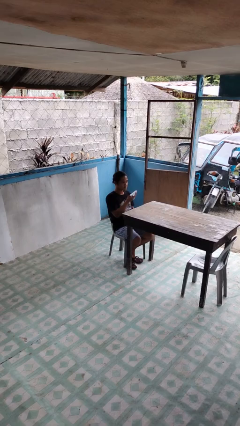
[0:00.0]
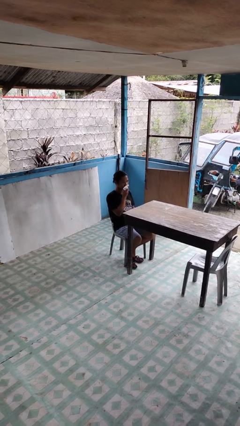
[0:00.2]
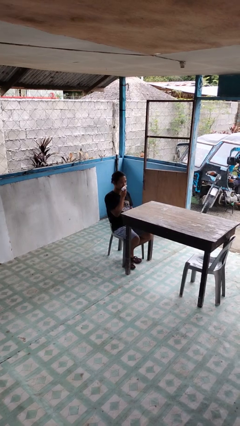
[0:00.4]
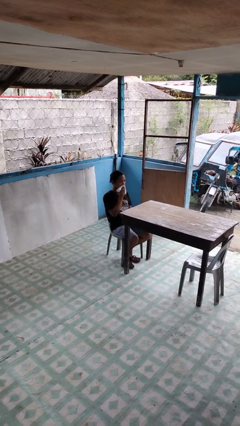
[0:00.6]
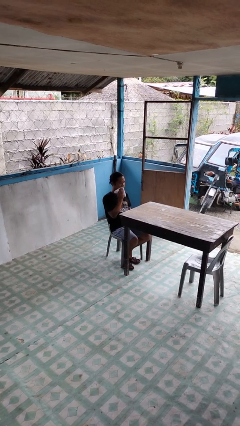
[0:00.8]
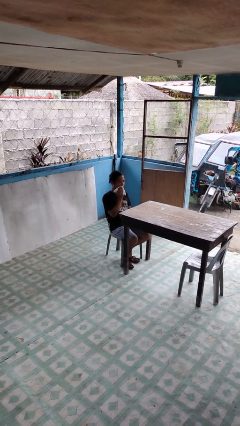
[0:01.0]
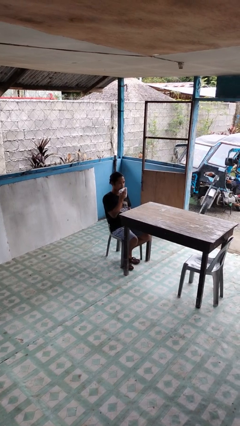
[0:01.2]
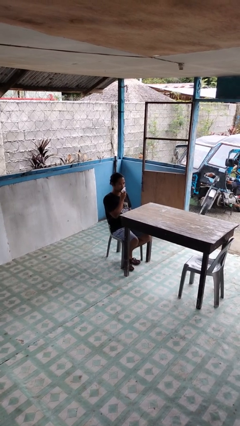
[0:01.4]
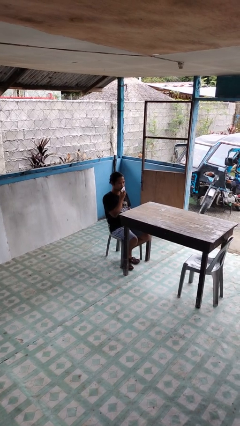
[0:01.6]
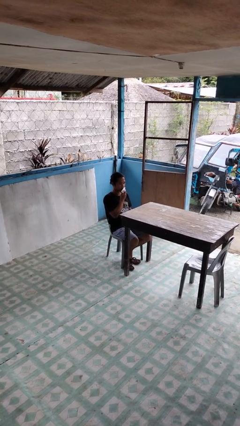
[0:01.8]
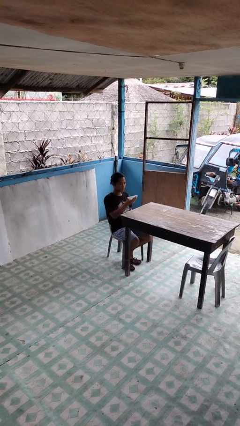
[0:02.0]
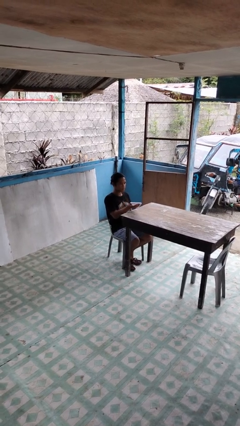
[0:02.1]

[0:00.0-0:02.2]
person wipes mouth with napkin

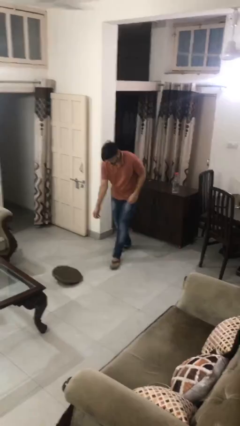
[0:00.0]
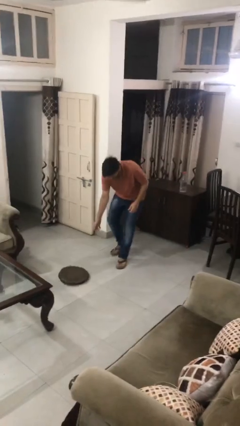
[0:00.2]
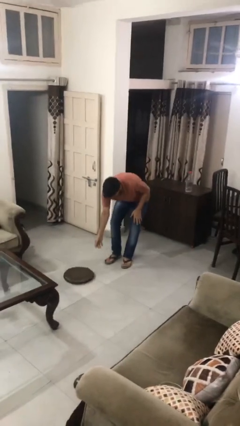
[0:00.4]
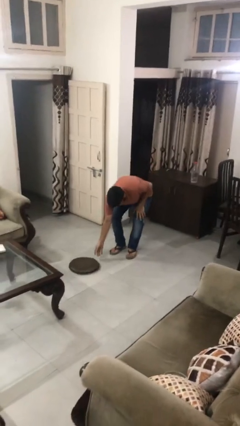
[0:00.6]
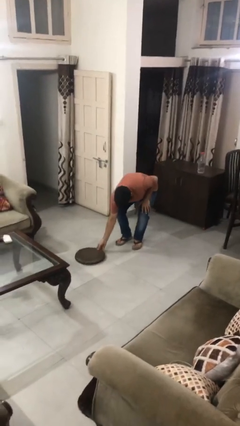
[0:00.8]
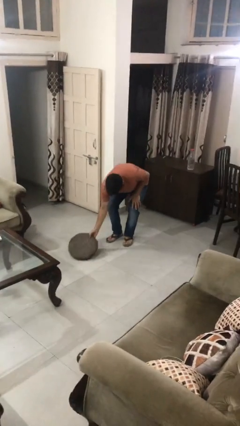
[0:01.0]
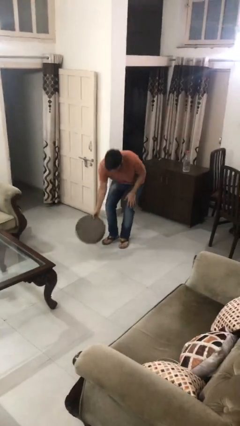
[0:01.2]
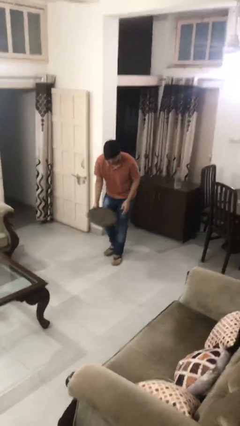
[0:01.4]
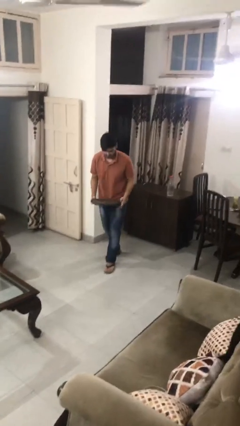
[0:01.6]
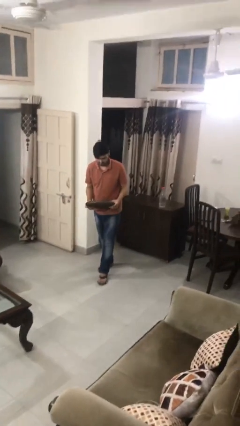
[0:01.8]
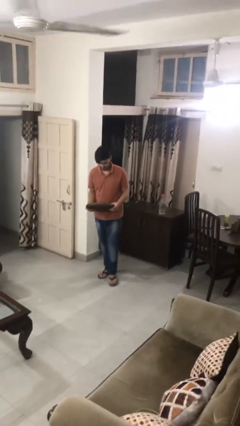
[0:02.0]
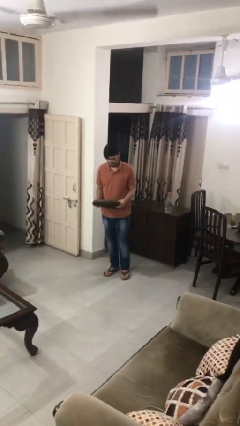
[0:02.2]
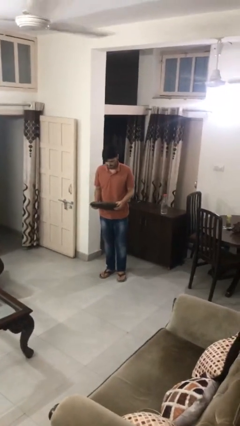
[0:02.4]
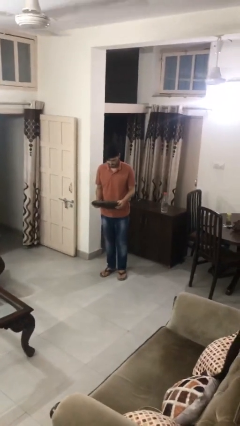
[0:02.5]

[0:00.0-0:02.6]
person picks up object from floor

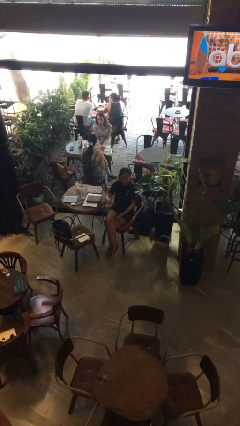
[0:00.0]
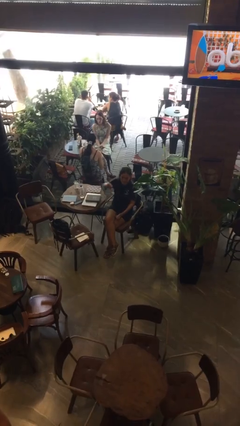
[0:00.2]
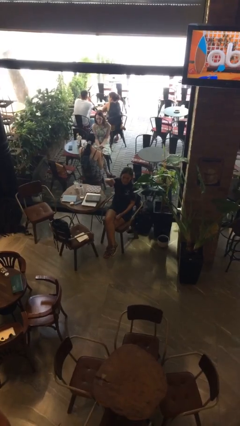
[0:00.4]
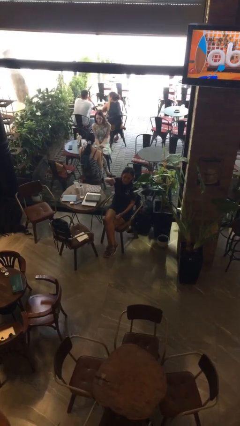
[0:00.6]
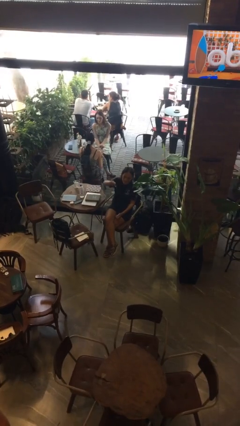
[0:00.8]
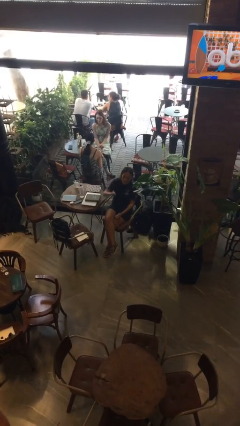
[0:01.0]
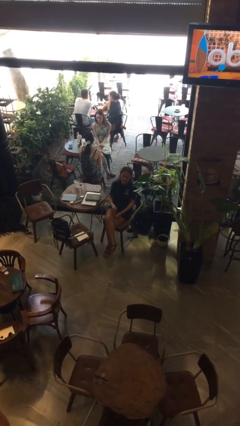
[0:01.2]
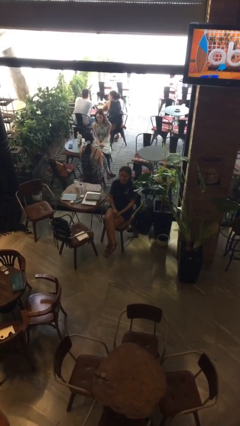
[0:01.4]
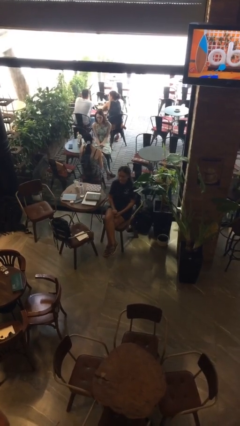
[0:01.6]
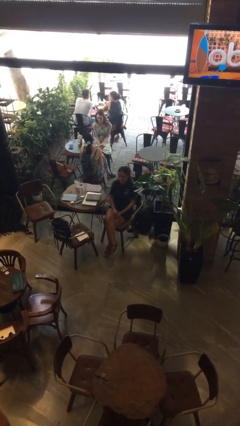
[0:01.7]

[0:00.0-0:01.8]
person gestures thumbs down

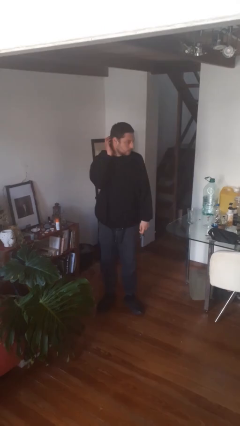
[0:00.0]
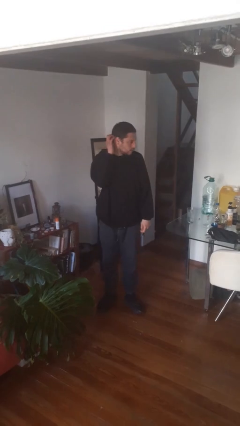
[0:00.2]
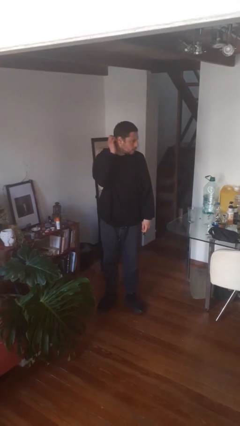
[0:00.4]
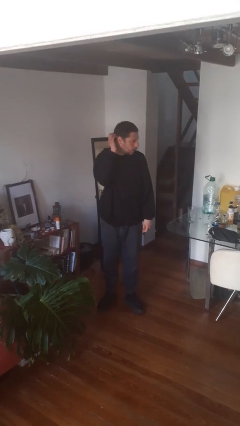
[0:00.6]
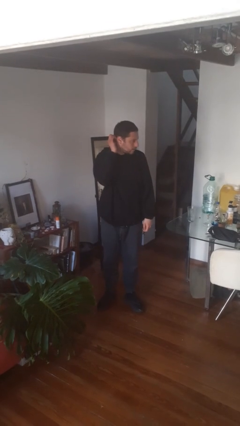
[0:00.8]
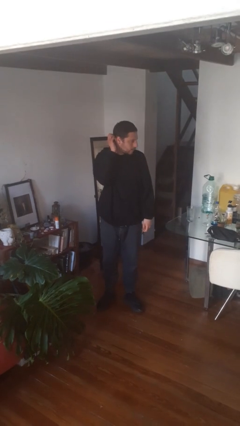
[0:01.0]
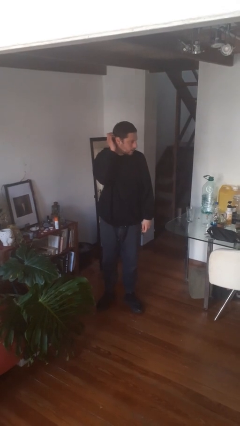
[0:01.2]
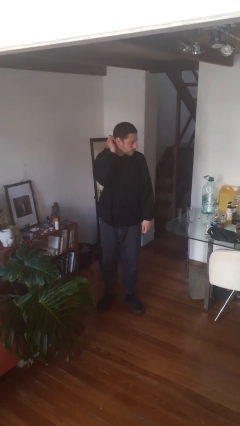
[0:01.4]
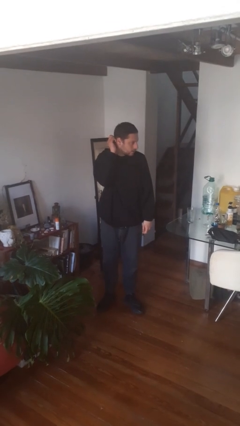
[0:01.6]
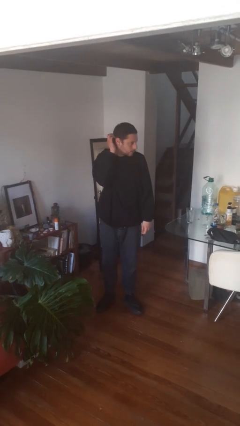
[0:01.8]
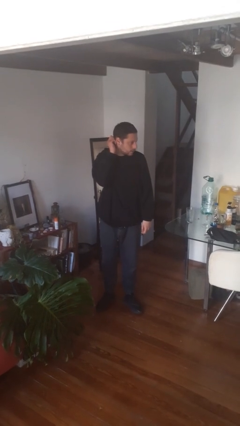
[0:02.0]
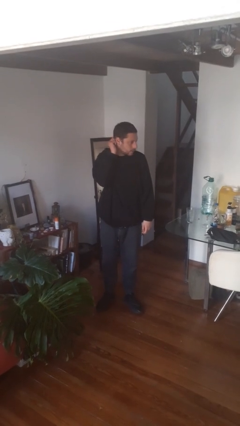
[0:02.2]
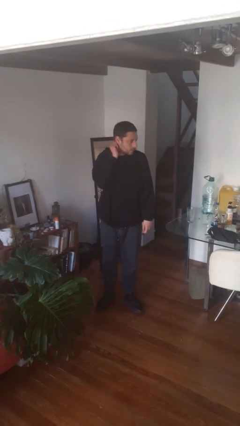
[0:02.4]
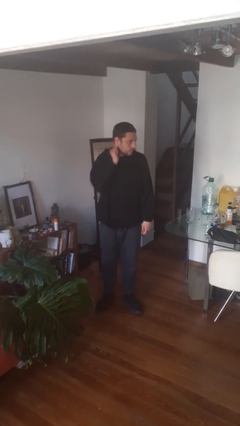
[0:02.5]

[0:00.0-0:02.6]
person scratches face

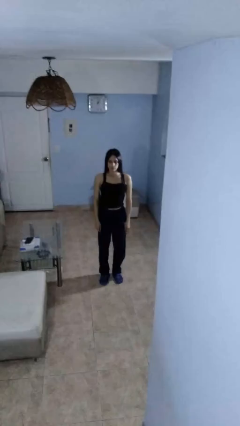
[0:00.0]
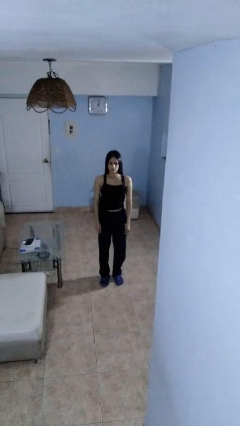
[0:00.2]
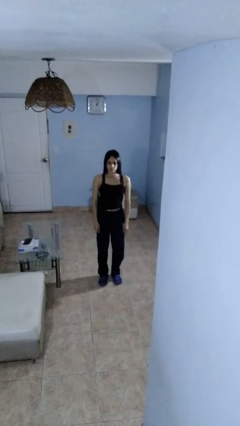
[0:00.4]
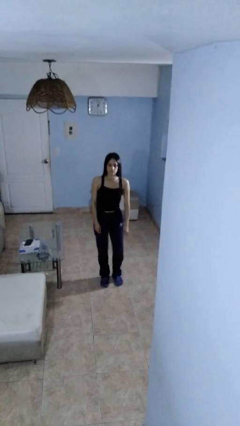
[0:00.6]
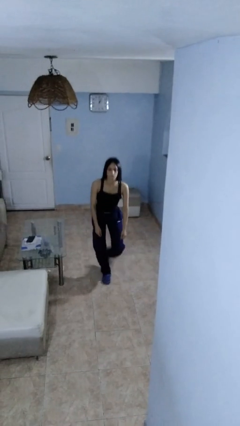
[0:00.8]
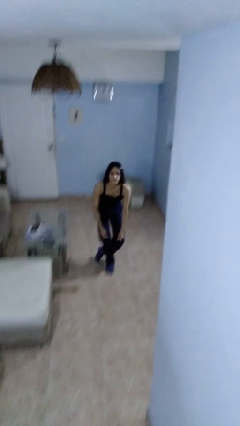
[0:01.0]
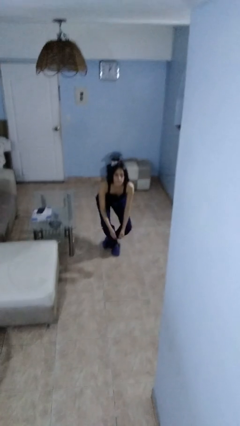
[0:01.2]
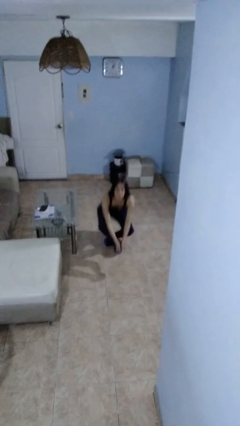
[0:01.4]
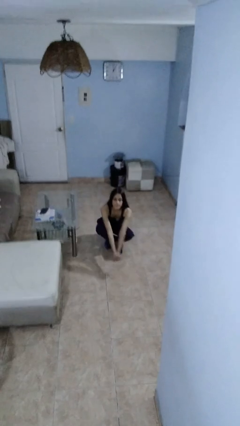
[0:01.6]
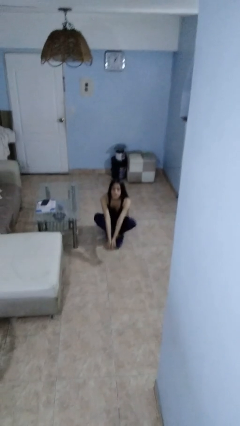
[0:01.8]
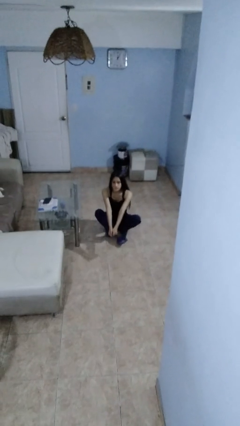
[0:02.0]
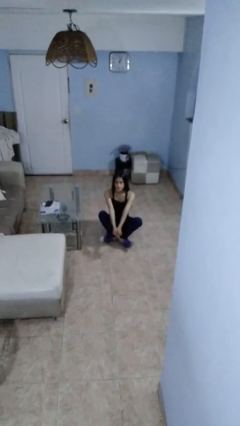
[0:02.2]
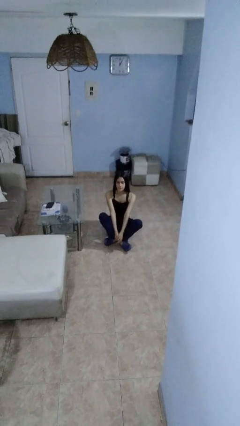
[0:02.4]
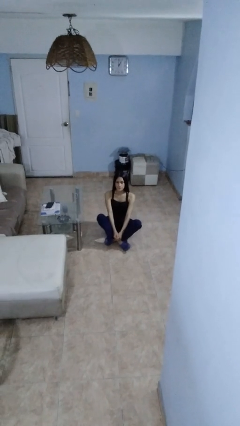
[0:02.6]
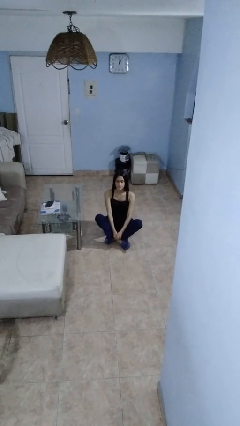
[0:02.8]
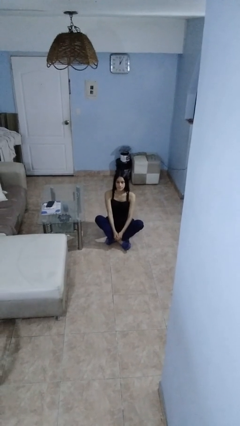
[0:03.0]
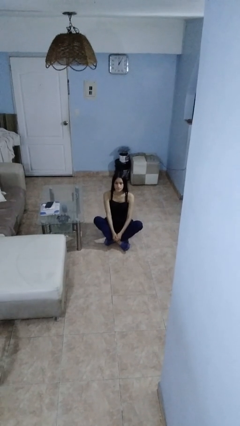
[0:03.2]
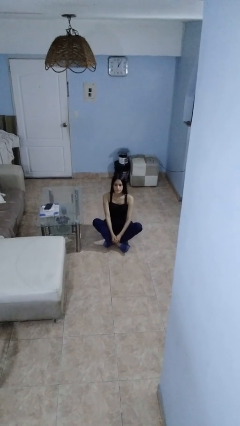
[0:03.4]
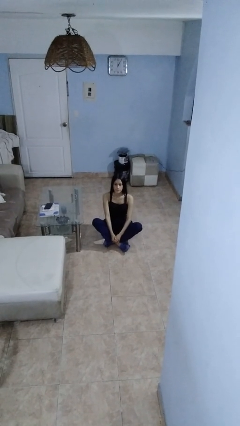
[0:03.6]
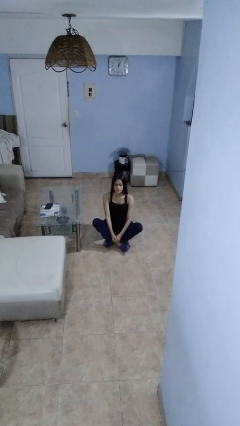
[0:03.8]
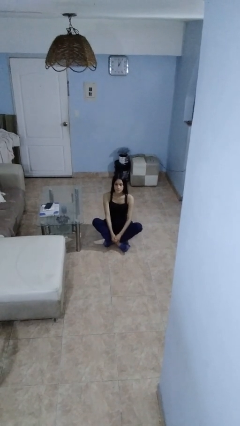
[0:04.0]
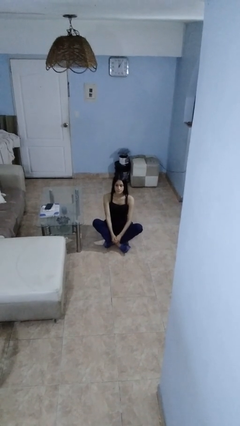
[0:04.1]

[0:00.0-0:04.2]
person sits crisscross

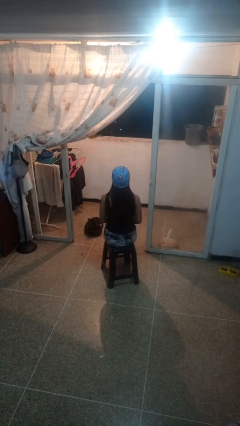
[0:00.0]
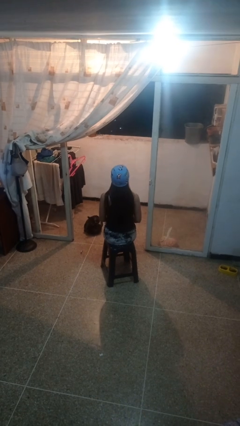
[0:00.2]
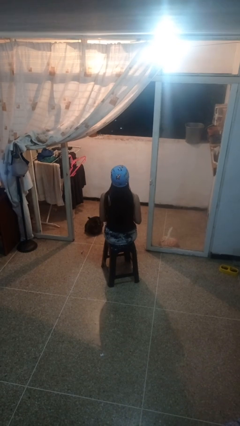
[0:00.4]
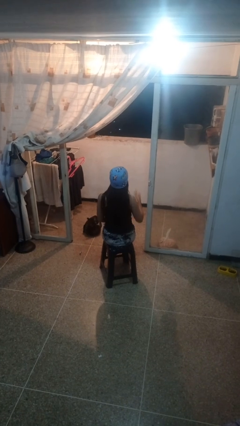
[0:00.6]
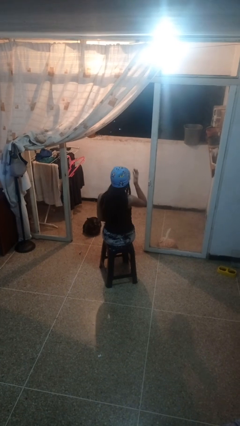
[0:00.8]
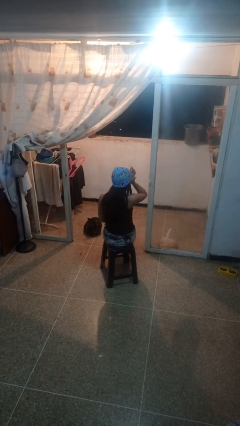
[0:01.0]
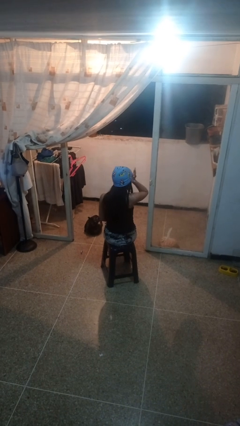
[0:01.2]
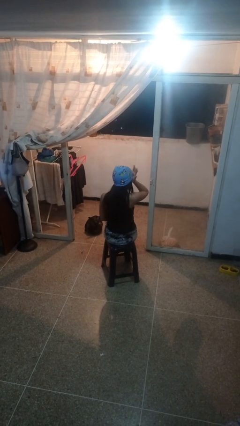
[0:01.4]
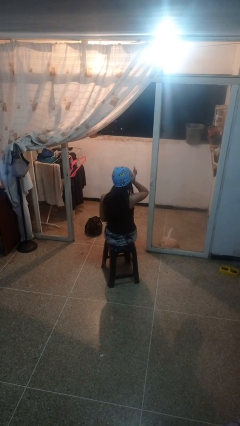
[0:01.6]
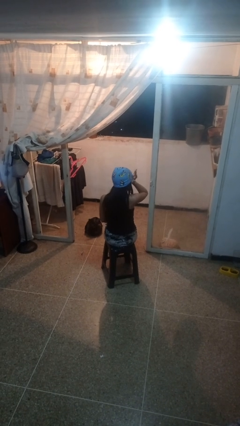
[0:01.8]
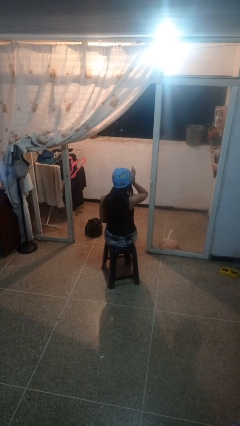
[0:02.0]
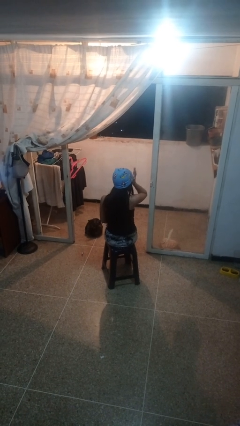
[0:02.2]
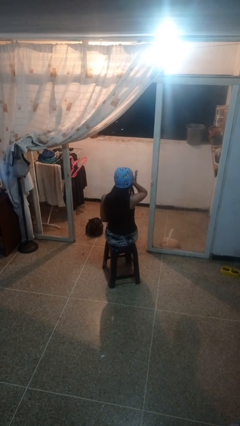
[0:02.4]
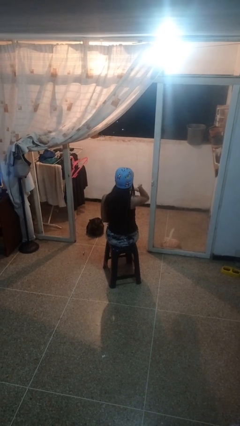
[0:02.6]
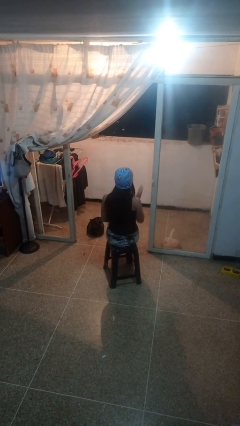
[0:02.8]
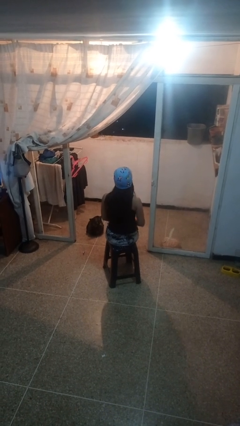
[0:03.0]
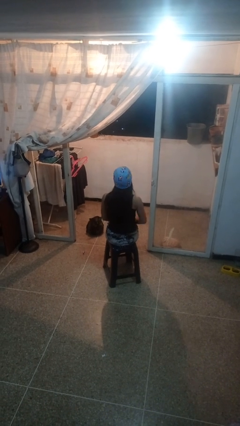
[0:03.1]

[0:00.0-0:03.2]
person rubs eyes

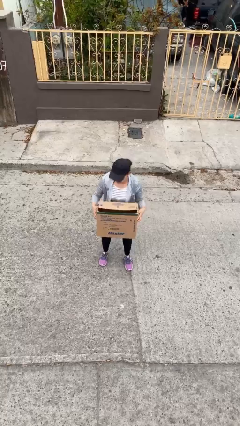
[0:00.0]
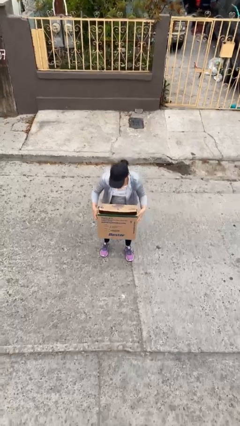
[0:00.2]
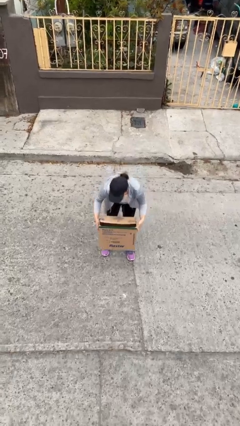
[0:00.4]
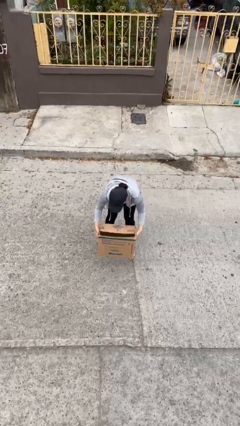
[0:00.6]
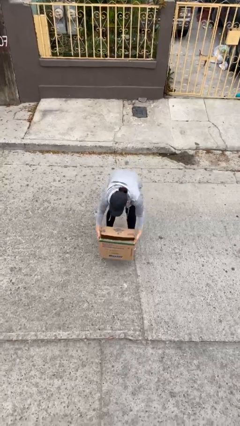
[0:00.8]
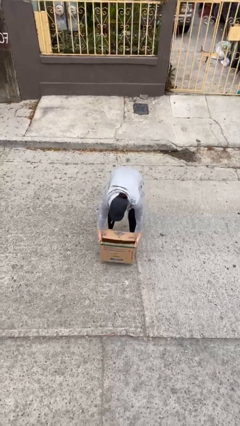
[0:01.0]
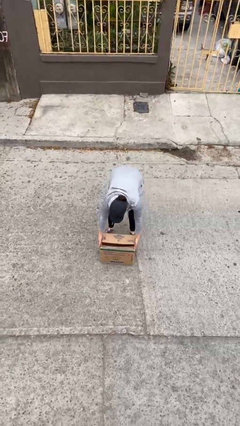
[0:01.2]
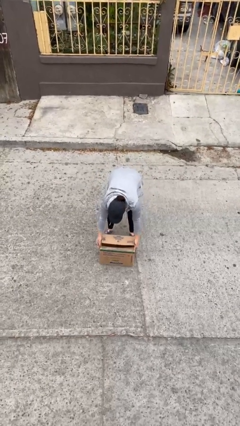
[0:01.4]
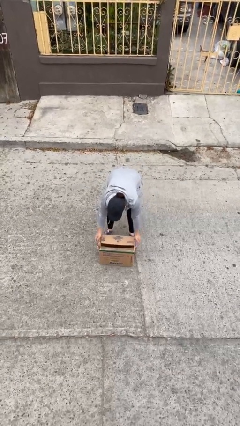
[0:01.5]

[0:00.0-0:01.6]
person puts down object on floor
